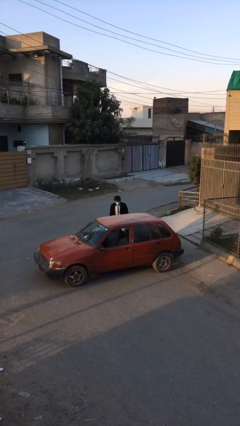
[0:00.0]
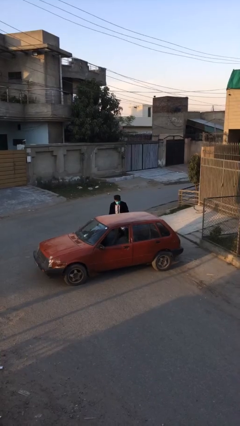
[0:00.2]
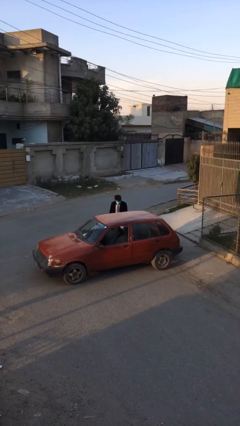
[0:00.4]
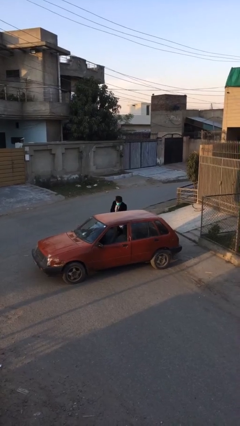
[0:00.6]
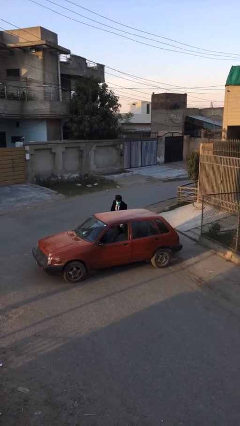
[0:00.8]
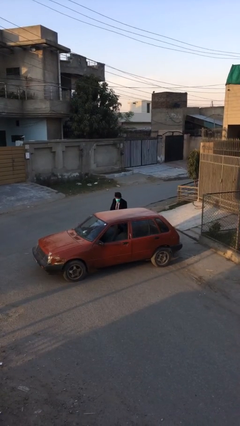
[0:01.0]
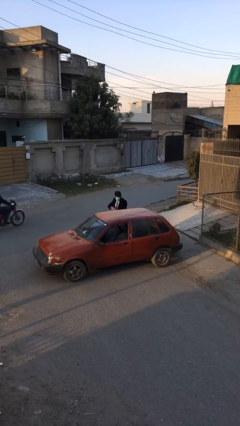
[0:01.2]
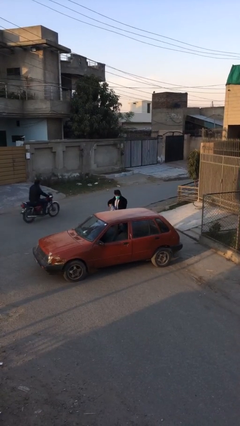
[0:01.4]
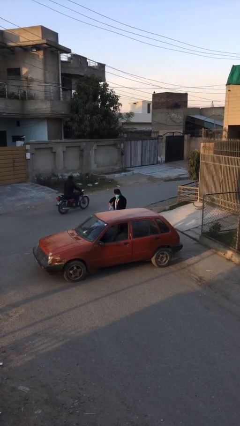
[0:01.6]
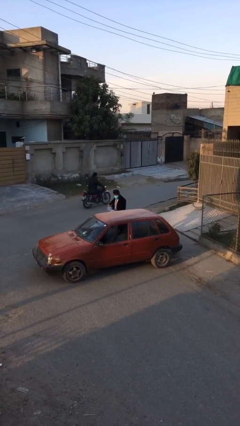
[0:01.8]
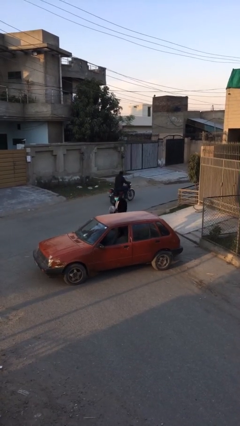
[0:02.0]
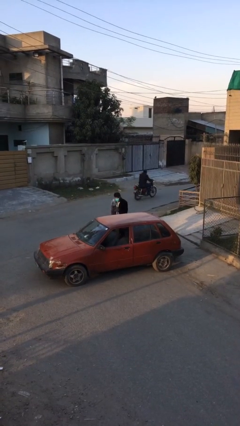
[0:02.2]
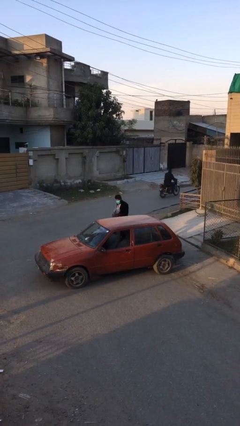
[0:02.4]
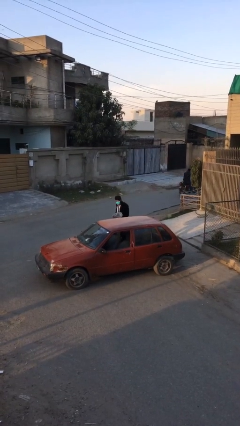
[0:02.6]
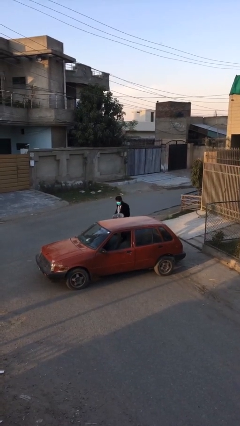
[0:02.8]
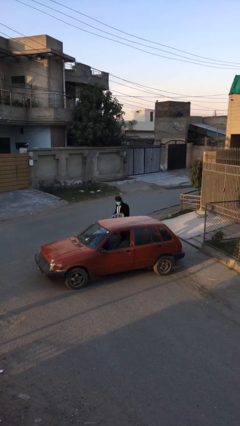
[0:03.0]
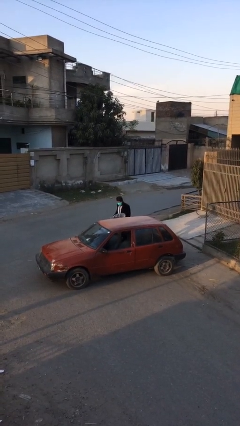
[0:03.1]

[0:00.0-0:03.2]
person unloads car

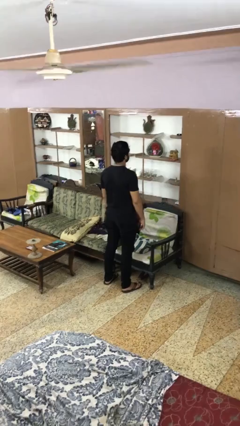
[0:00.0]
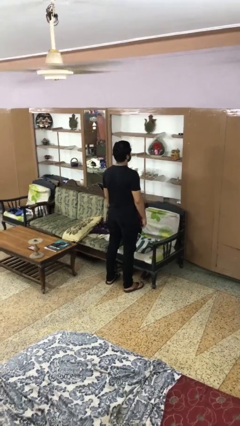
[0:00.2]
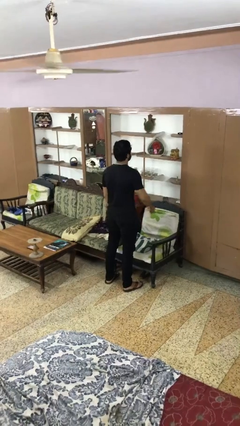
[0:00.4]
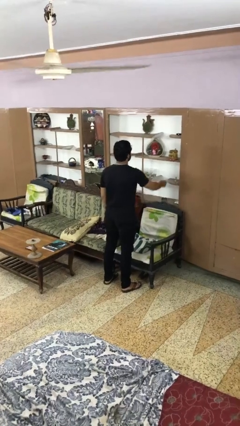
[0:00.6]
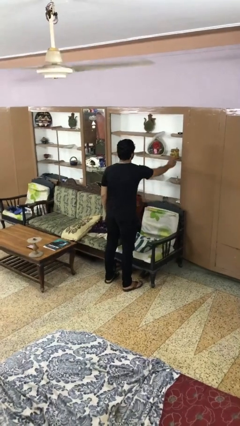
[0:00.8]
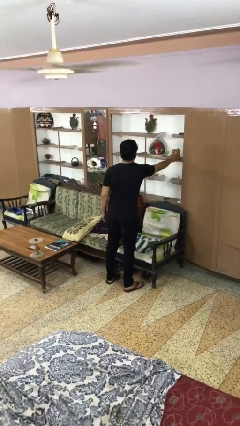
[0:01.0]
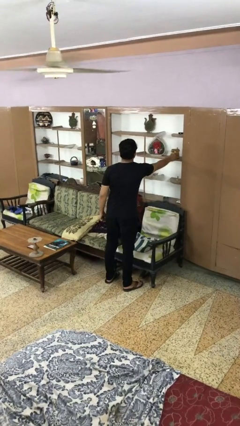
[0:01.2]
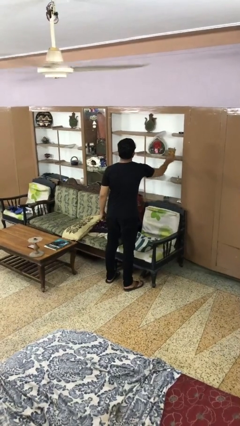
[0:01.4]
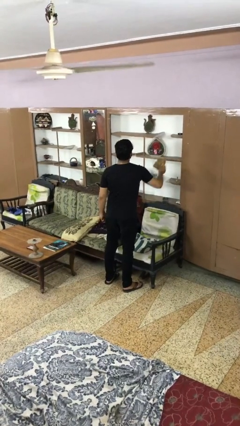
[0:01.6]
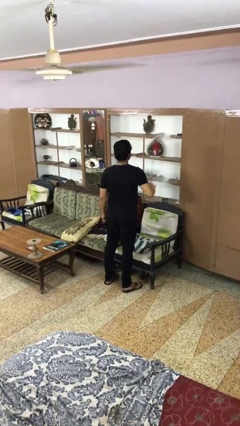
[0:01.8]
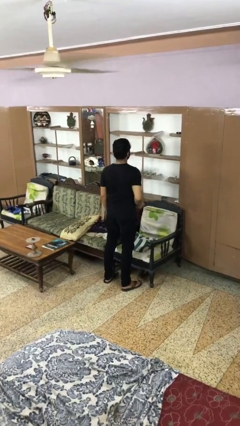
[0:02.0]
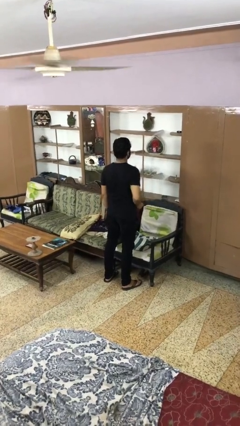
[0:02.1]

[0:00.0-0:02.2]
person picks up object from shelf

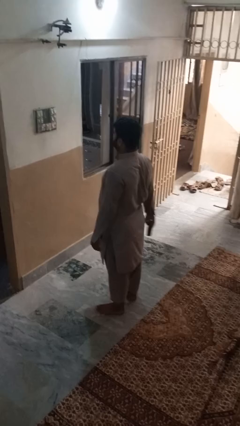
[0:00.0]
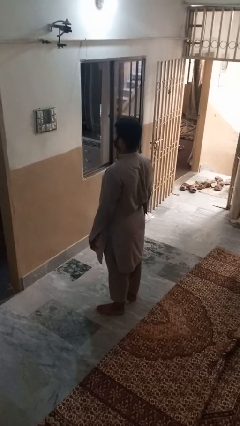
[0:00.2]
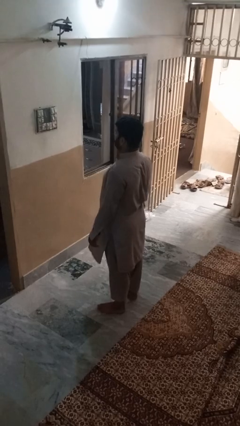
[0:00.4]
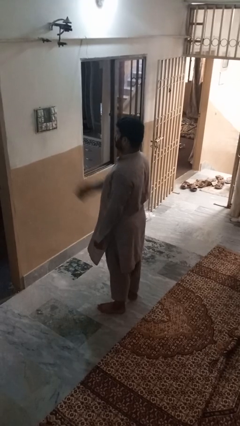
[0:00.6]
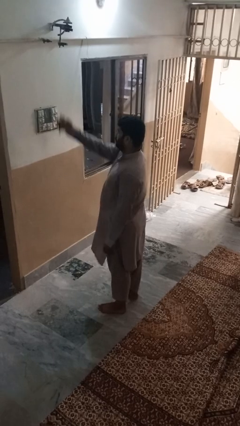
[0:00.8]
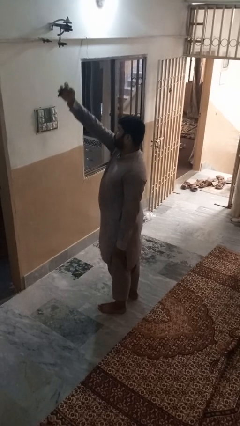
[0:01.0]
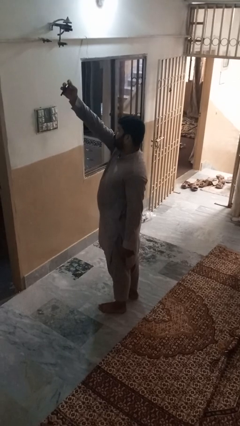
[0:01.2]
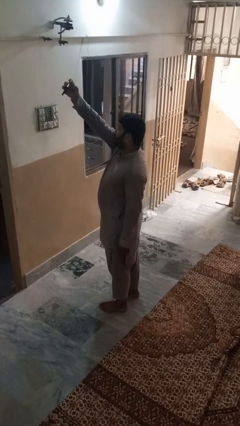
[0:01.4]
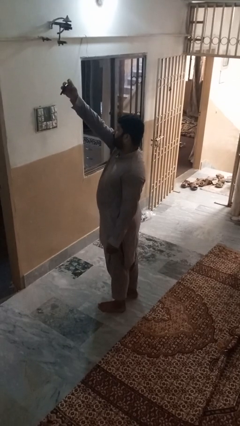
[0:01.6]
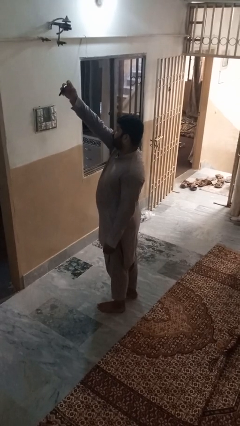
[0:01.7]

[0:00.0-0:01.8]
person takes selfie

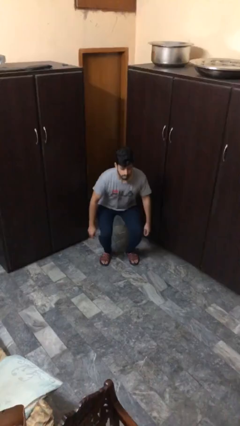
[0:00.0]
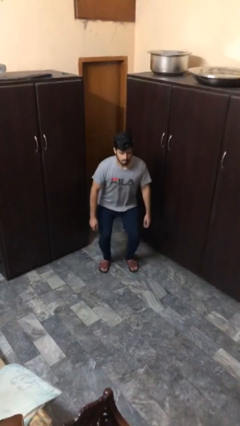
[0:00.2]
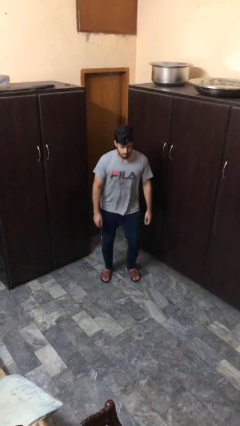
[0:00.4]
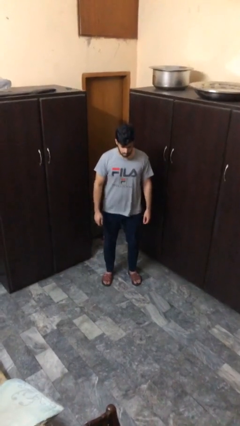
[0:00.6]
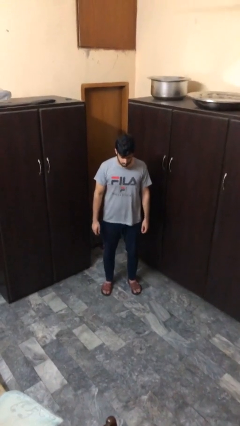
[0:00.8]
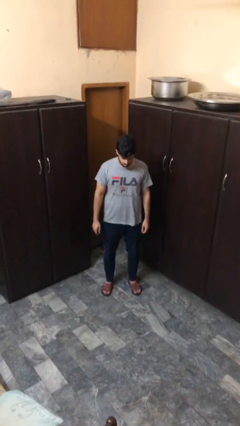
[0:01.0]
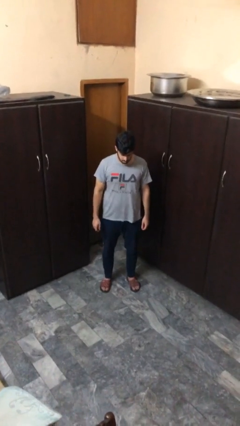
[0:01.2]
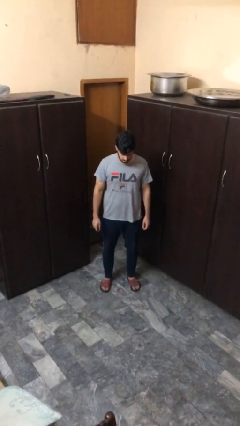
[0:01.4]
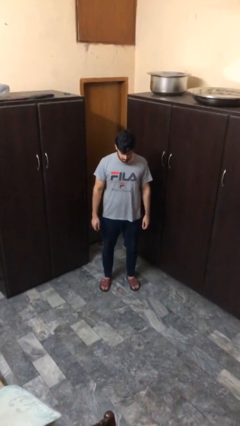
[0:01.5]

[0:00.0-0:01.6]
person stands up

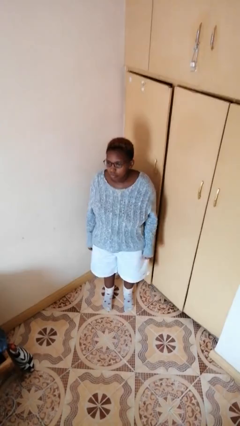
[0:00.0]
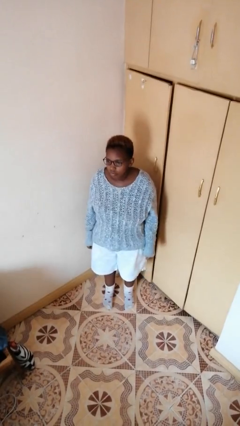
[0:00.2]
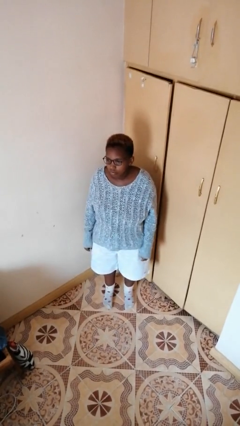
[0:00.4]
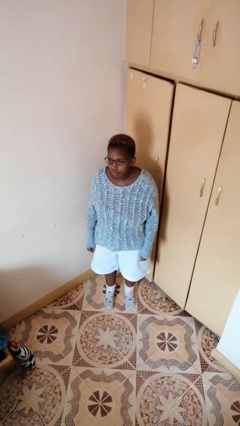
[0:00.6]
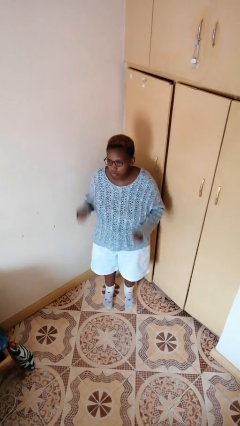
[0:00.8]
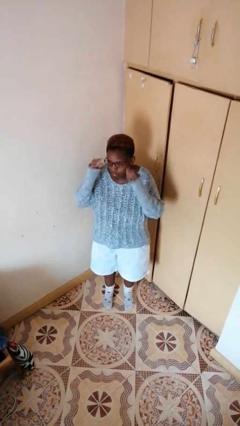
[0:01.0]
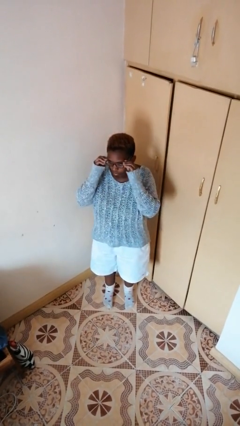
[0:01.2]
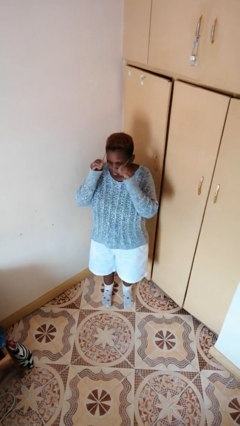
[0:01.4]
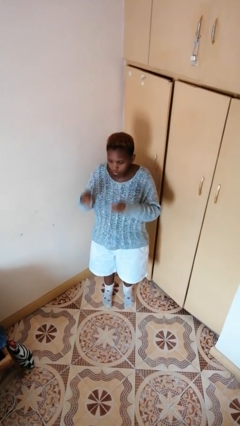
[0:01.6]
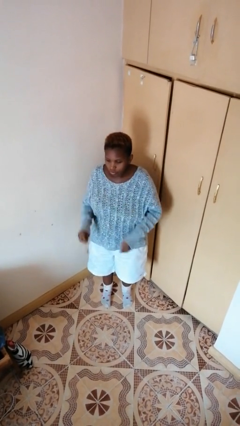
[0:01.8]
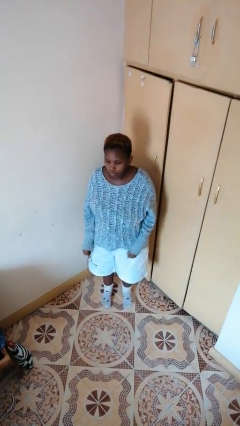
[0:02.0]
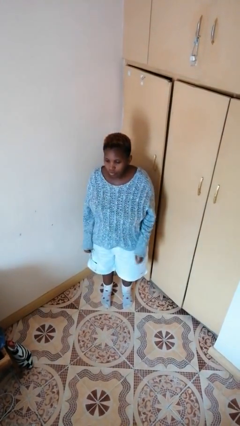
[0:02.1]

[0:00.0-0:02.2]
person takes off glasses

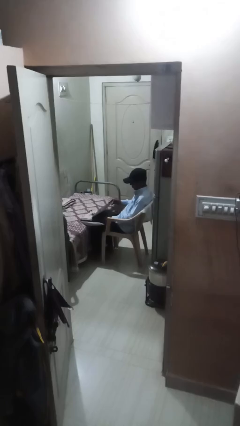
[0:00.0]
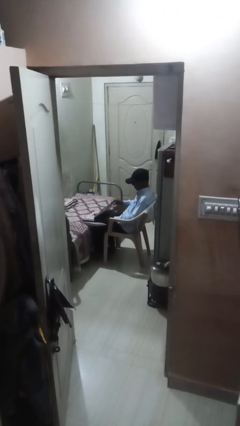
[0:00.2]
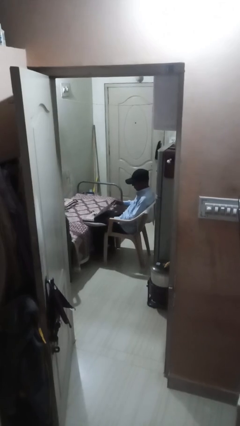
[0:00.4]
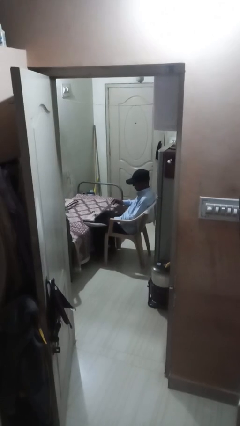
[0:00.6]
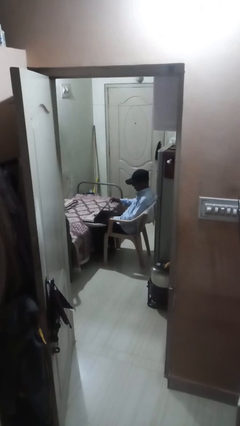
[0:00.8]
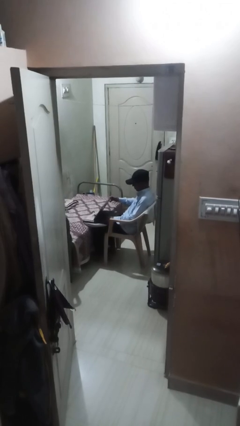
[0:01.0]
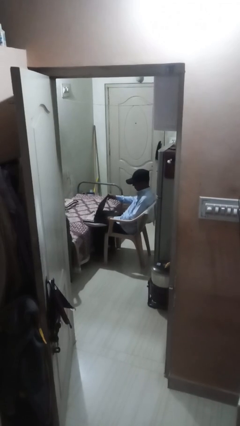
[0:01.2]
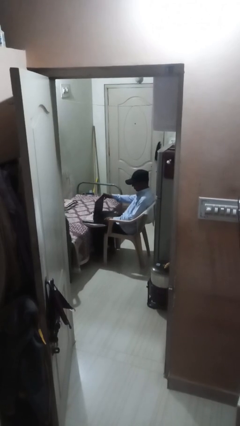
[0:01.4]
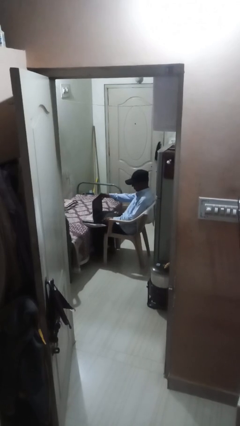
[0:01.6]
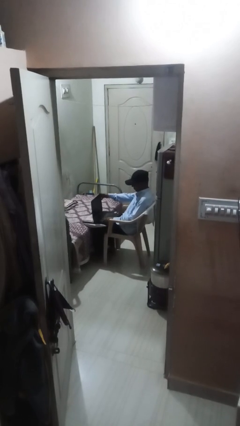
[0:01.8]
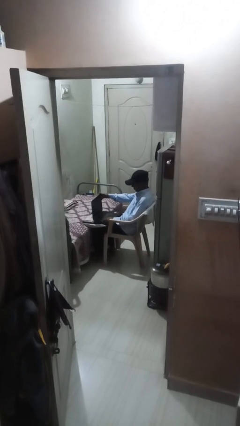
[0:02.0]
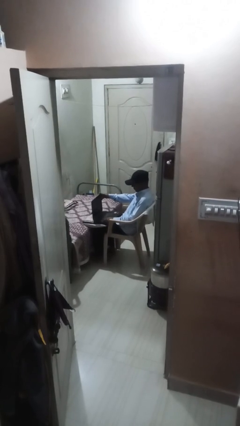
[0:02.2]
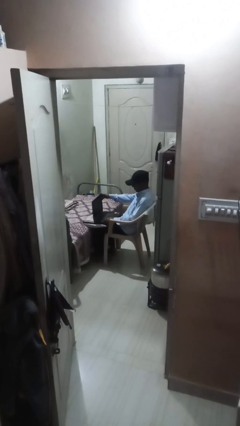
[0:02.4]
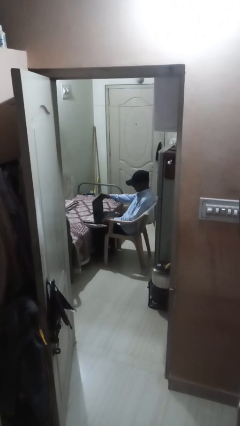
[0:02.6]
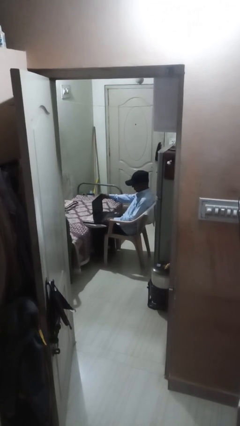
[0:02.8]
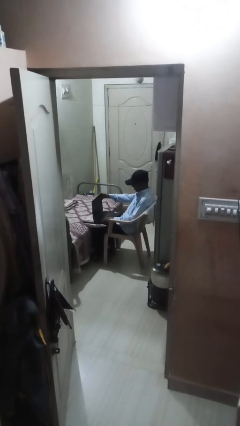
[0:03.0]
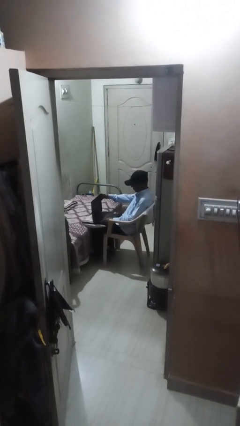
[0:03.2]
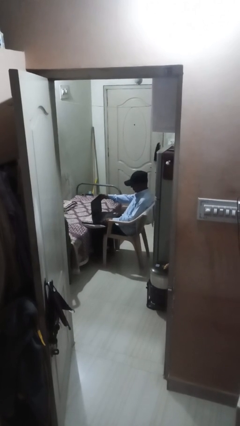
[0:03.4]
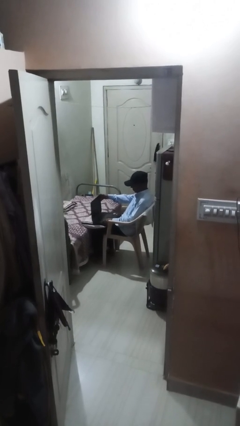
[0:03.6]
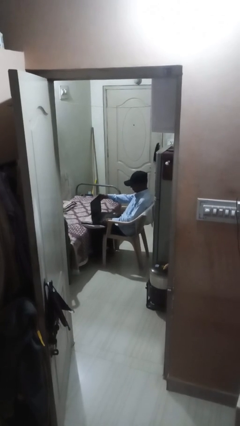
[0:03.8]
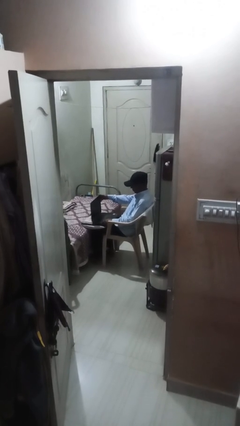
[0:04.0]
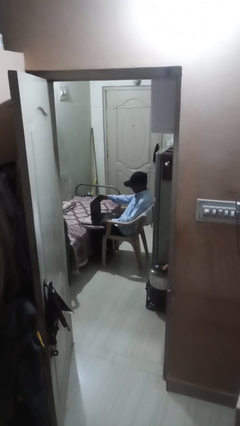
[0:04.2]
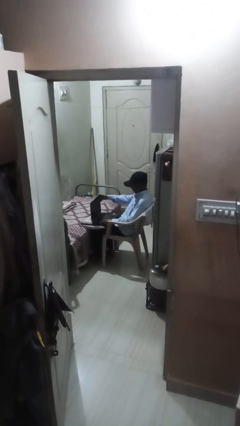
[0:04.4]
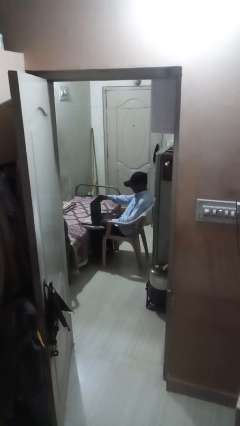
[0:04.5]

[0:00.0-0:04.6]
person interacts with laptop

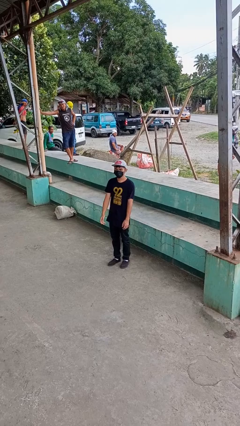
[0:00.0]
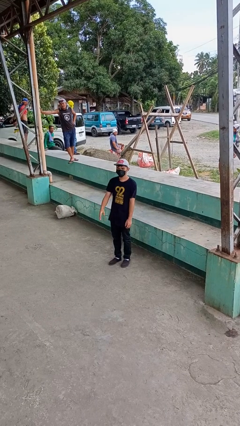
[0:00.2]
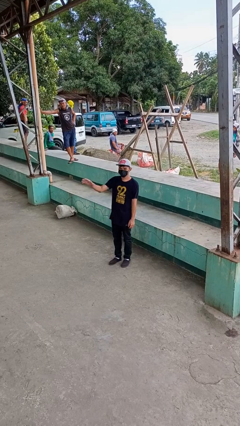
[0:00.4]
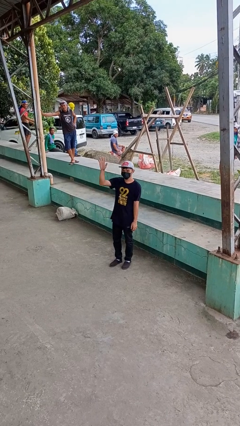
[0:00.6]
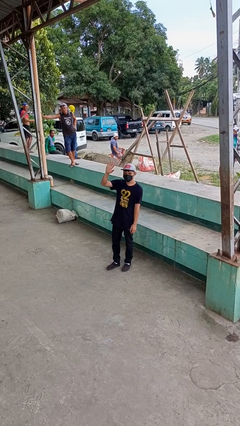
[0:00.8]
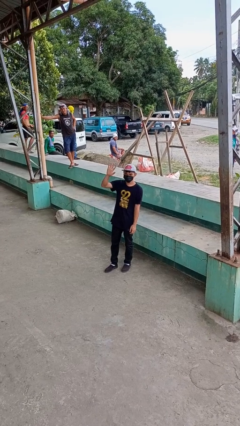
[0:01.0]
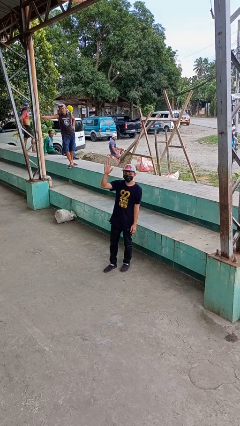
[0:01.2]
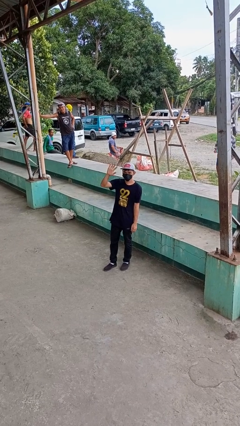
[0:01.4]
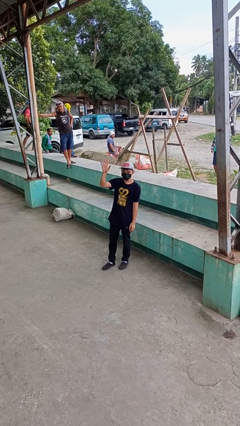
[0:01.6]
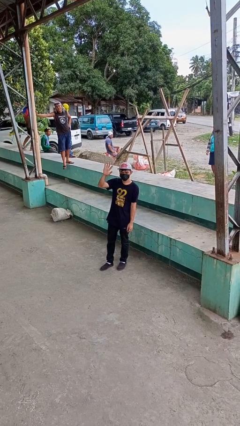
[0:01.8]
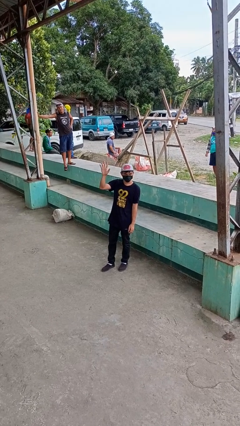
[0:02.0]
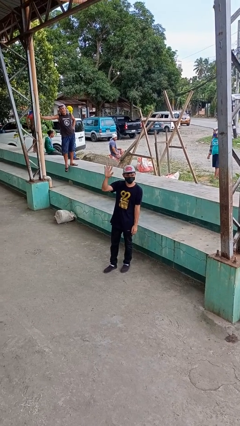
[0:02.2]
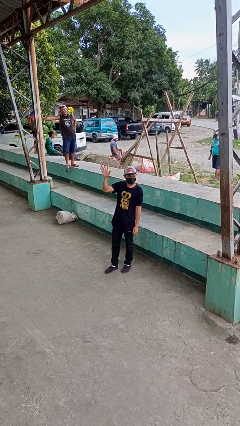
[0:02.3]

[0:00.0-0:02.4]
person waves at person
